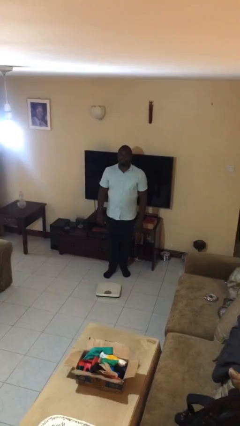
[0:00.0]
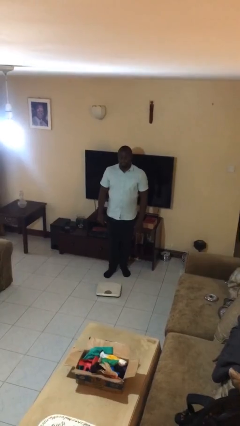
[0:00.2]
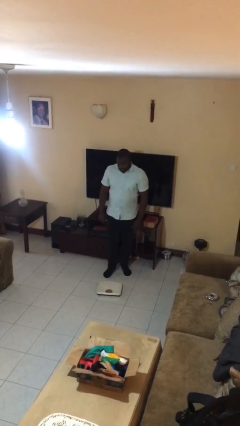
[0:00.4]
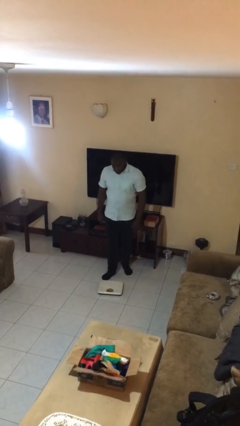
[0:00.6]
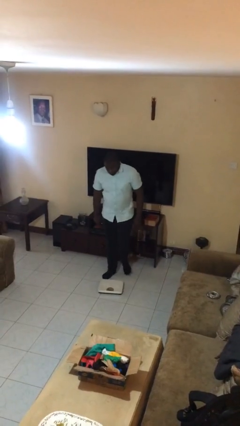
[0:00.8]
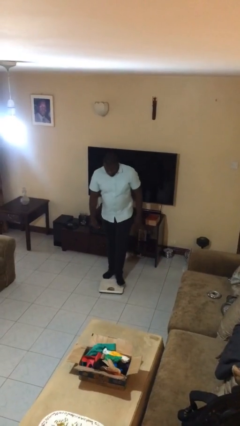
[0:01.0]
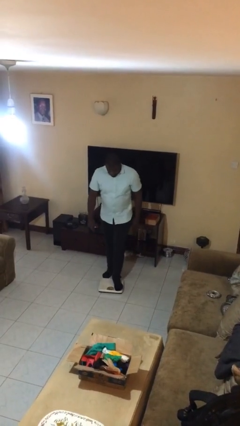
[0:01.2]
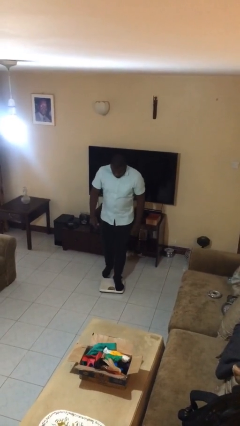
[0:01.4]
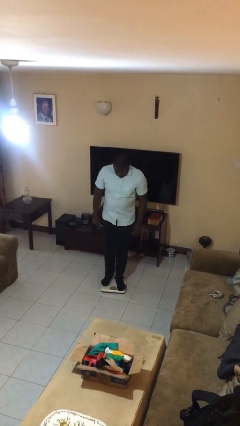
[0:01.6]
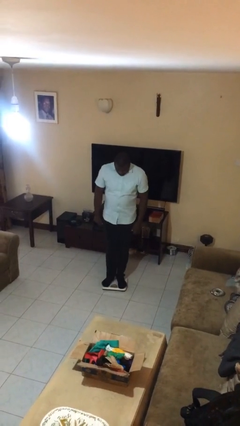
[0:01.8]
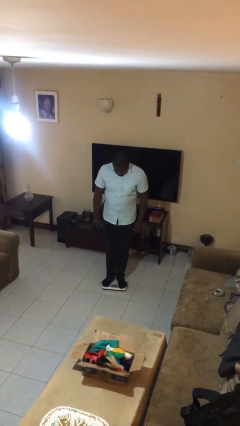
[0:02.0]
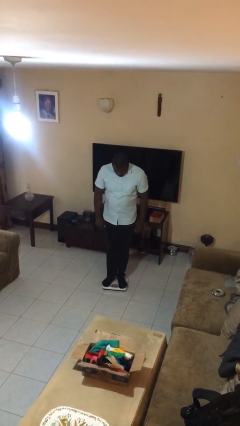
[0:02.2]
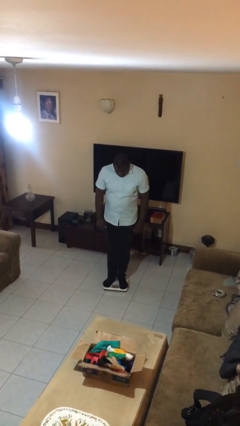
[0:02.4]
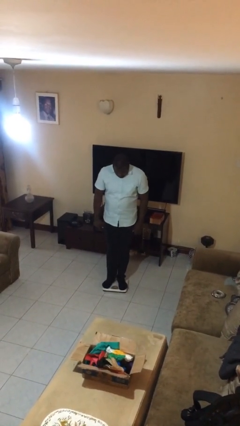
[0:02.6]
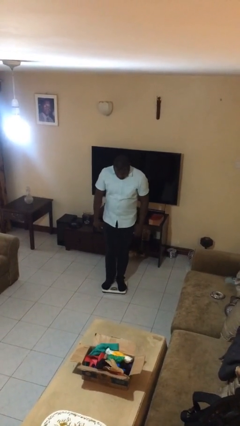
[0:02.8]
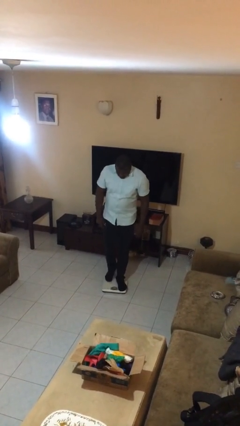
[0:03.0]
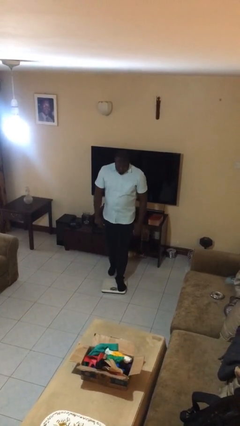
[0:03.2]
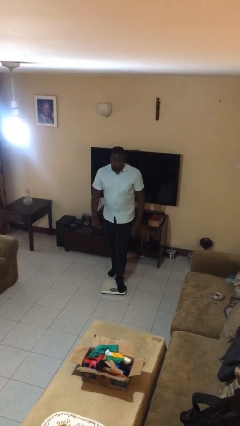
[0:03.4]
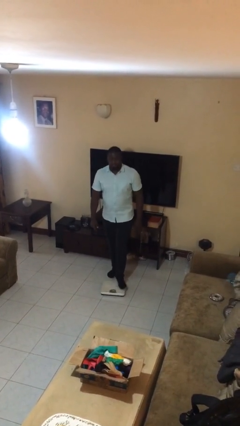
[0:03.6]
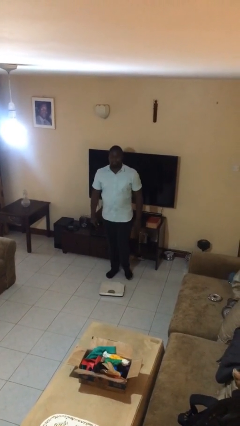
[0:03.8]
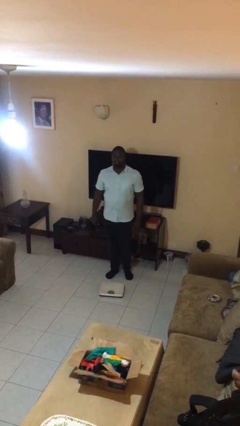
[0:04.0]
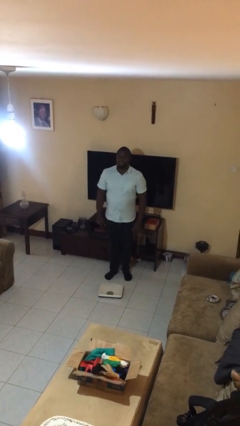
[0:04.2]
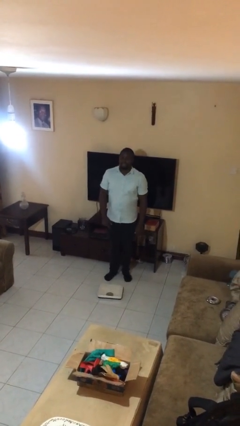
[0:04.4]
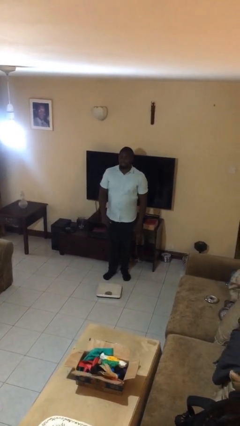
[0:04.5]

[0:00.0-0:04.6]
person uses bodyweight scale

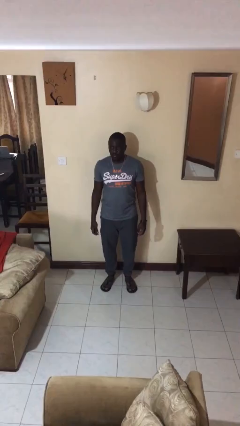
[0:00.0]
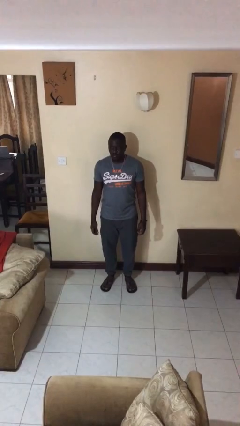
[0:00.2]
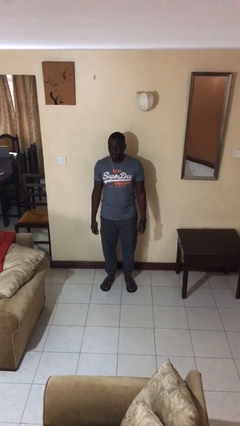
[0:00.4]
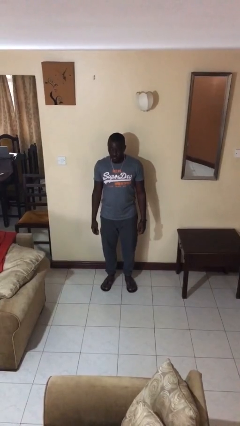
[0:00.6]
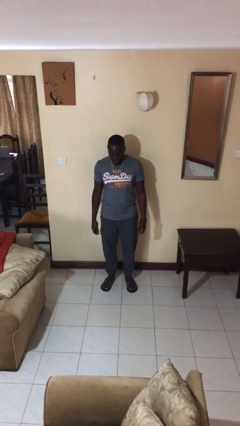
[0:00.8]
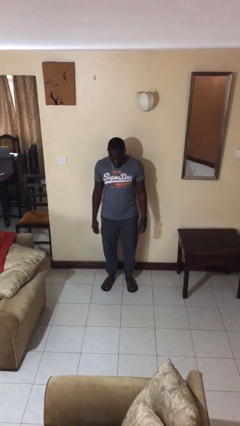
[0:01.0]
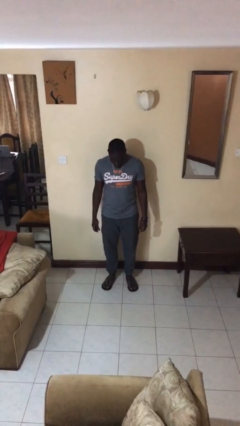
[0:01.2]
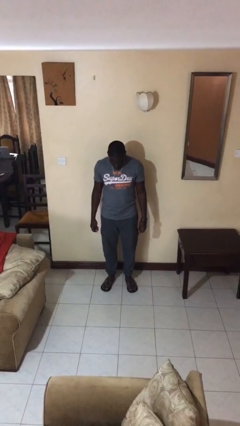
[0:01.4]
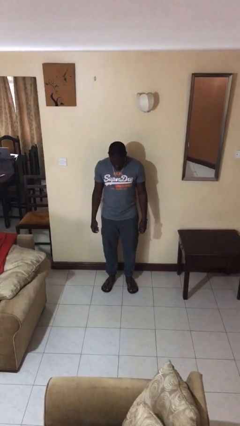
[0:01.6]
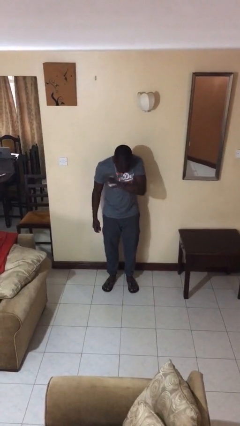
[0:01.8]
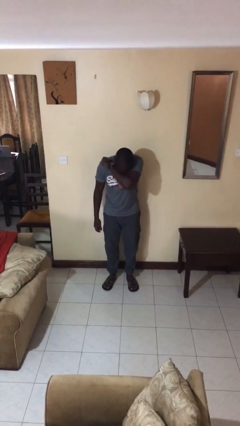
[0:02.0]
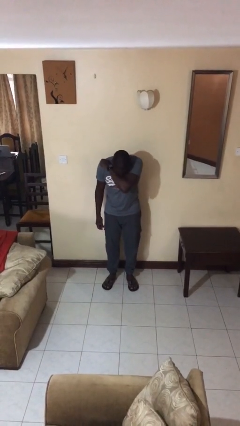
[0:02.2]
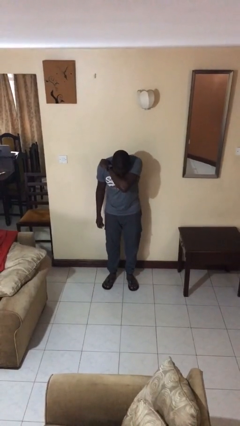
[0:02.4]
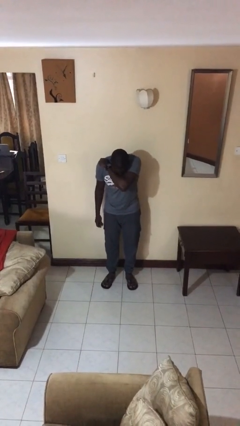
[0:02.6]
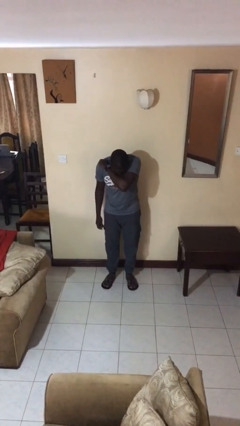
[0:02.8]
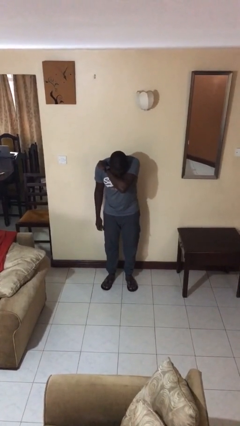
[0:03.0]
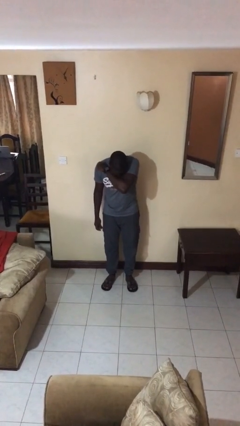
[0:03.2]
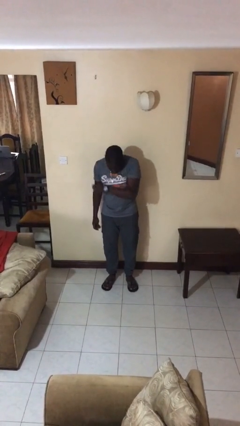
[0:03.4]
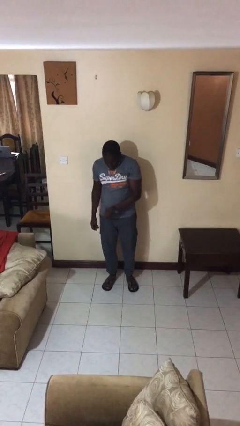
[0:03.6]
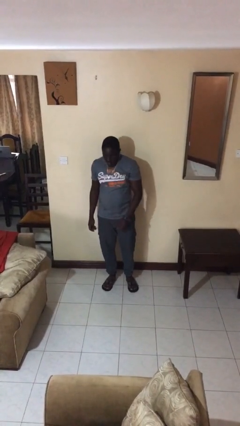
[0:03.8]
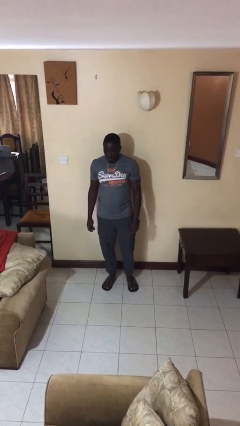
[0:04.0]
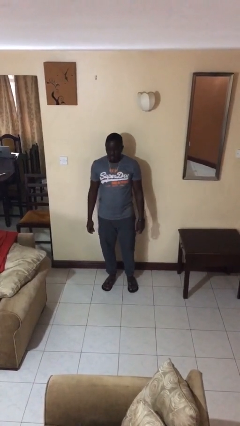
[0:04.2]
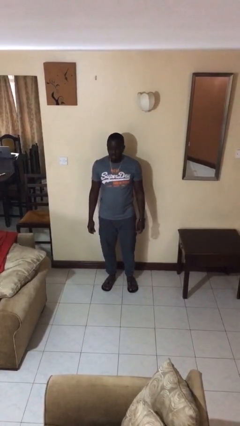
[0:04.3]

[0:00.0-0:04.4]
person sneezes into arm

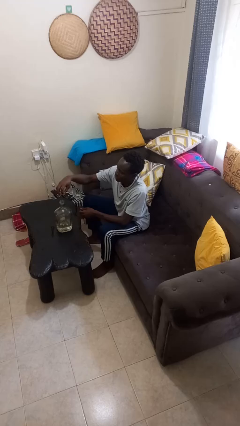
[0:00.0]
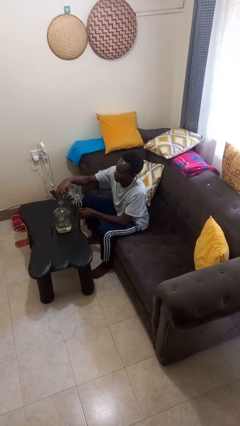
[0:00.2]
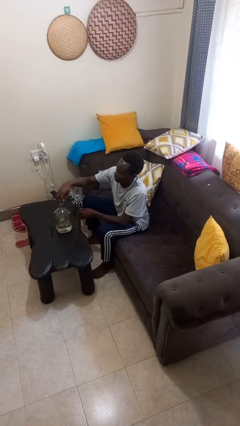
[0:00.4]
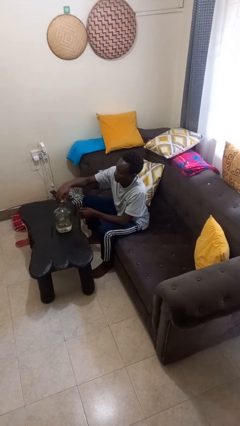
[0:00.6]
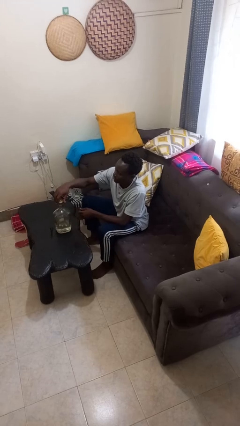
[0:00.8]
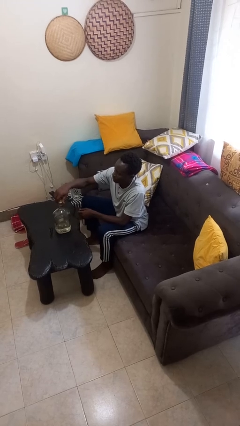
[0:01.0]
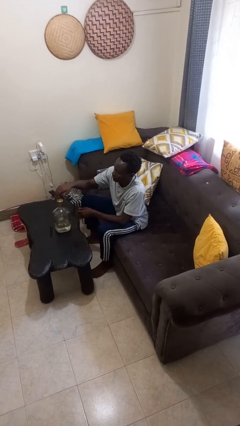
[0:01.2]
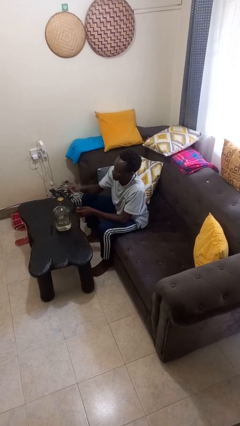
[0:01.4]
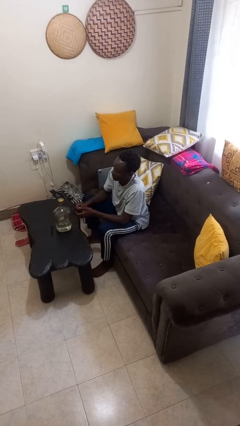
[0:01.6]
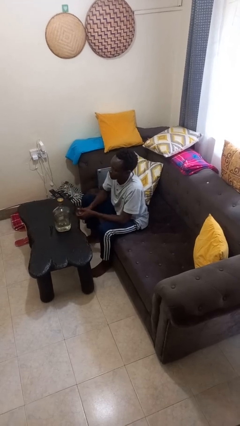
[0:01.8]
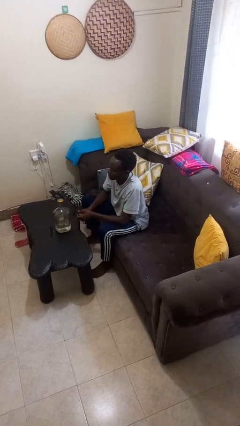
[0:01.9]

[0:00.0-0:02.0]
person screws lid to bottle

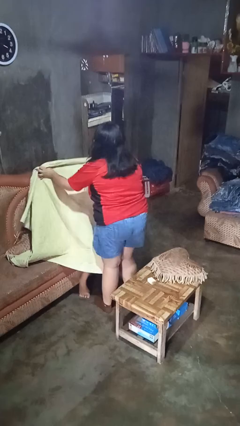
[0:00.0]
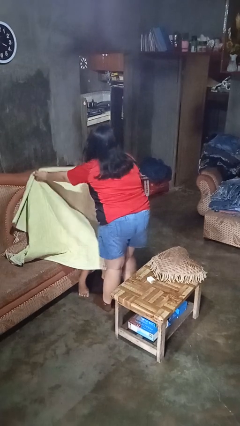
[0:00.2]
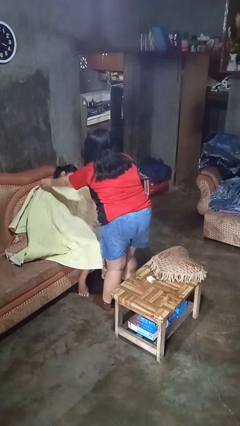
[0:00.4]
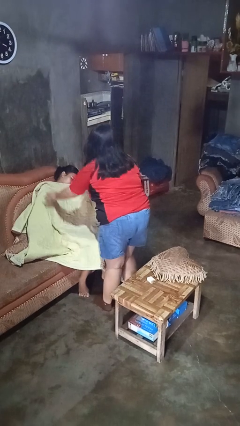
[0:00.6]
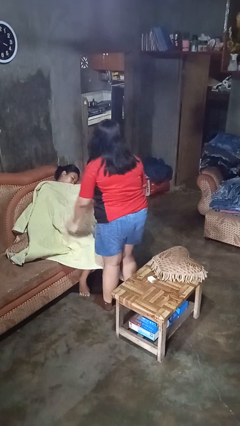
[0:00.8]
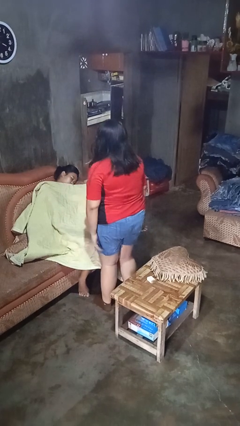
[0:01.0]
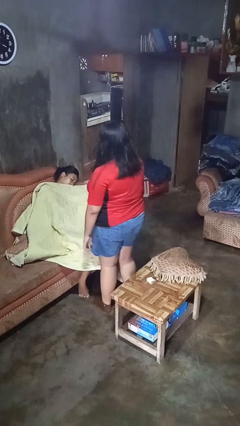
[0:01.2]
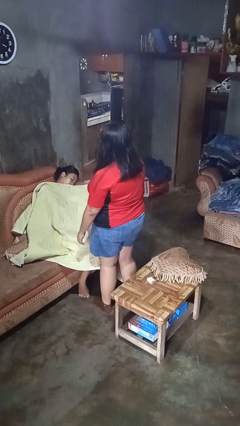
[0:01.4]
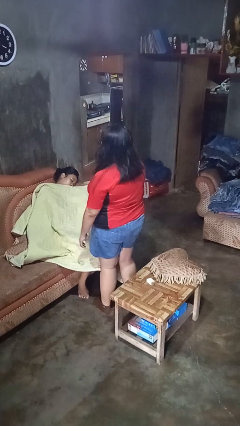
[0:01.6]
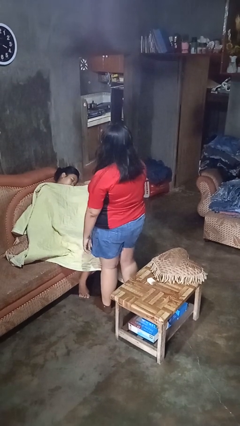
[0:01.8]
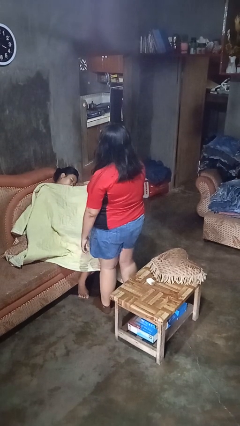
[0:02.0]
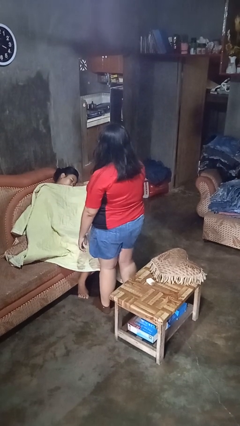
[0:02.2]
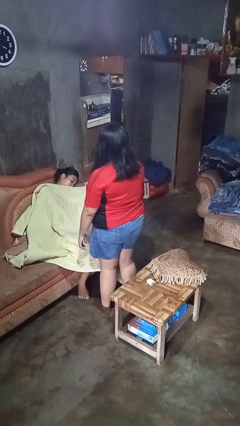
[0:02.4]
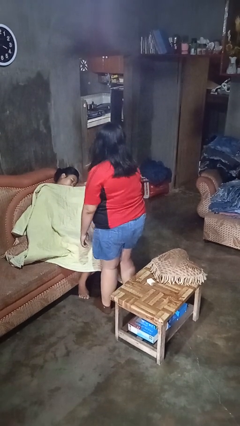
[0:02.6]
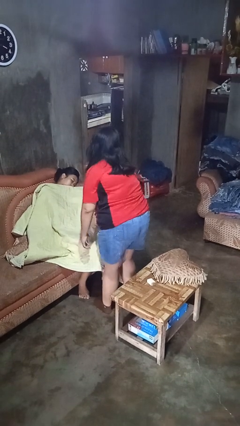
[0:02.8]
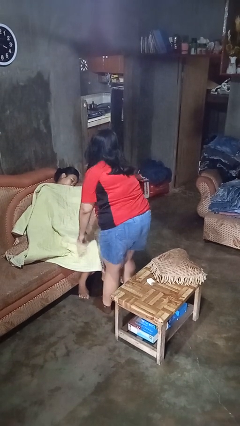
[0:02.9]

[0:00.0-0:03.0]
person covers friend with blanket

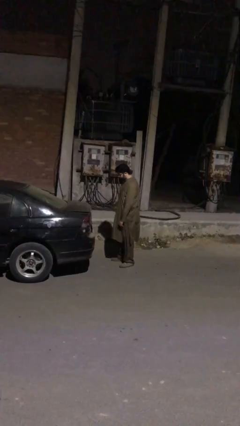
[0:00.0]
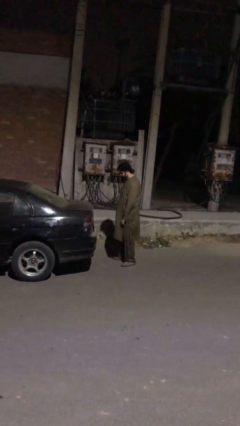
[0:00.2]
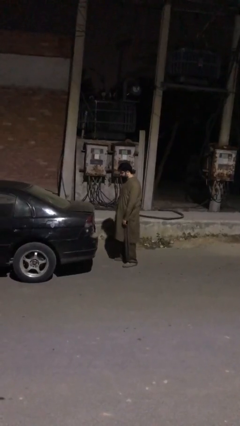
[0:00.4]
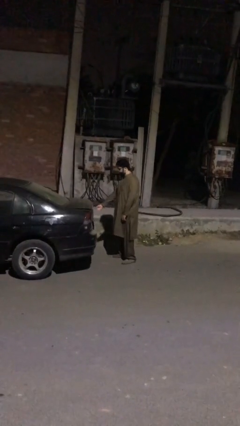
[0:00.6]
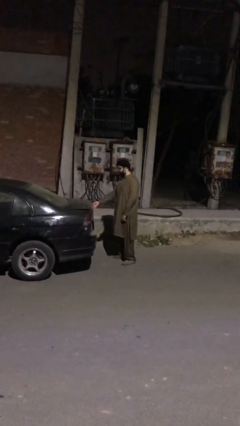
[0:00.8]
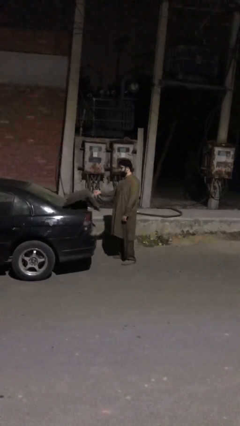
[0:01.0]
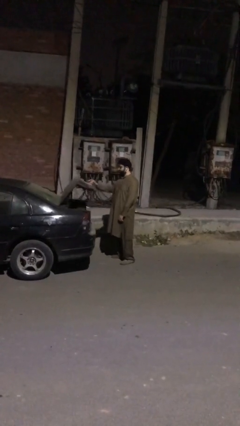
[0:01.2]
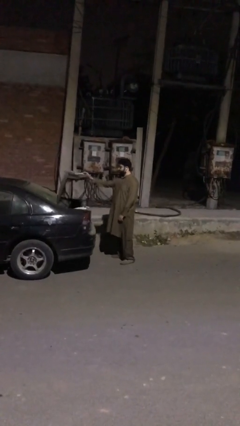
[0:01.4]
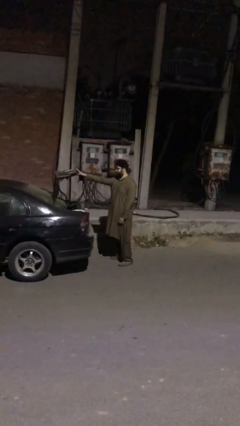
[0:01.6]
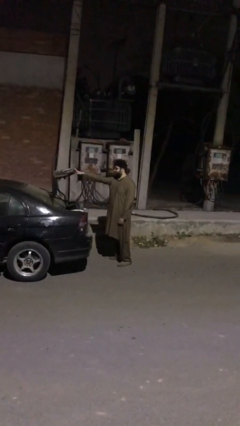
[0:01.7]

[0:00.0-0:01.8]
person opens car trunk

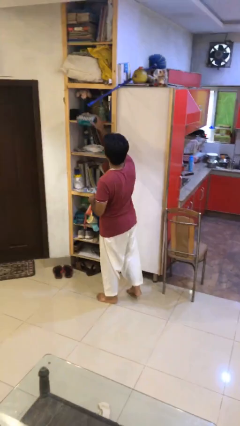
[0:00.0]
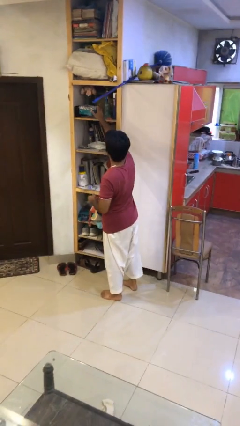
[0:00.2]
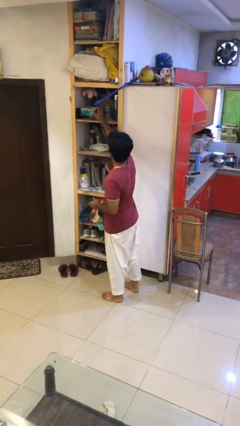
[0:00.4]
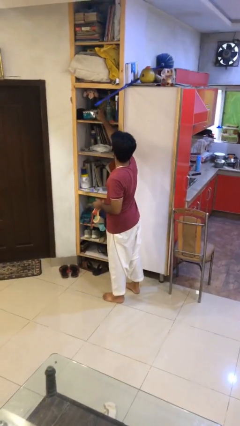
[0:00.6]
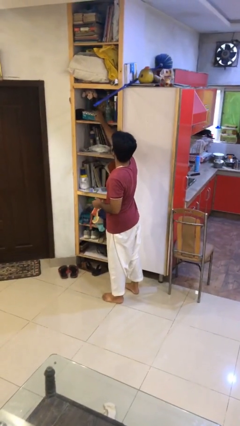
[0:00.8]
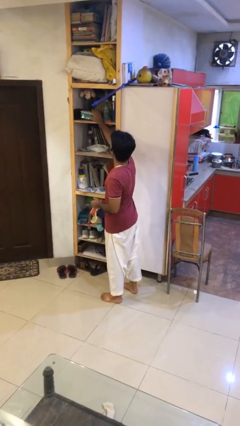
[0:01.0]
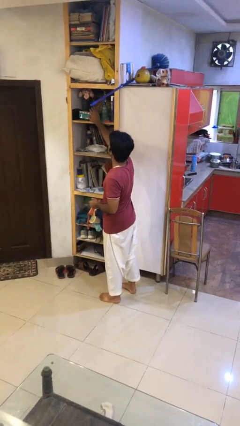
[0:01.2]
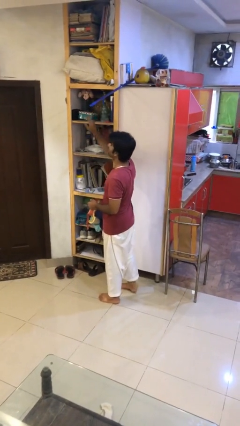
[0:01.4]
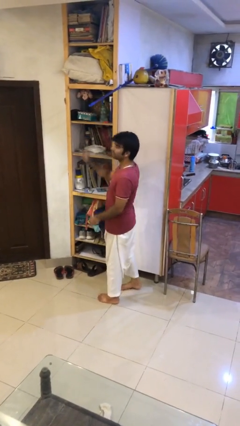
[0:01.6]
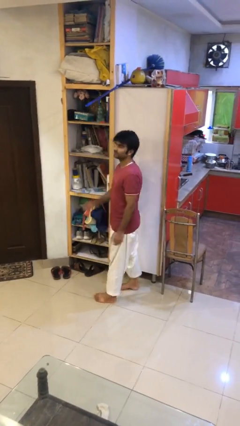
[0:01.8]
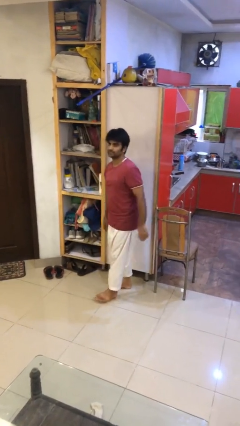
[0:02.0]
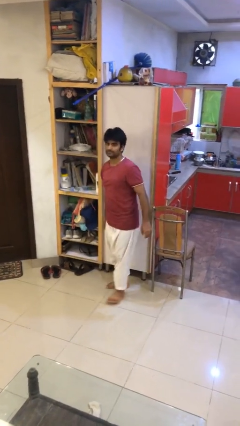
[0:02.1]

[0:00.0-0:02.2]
person puts down object on shelf

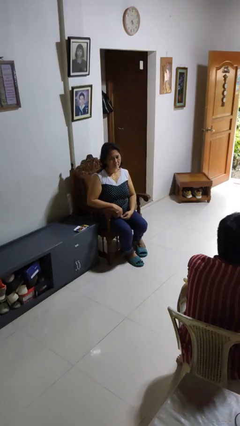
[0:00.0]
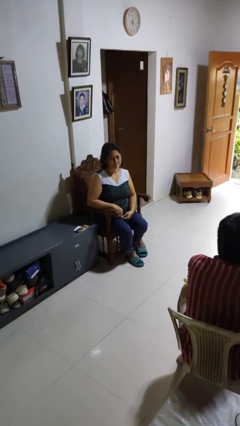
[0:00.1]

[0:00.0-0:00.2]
person takes off necklace
